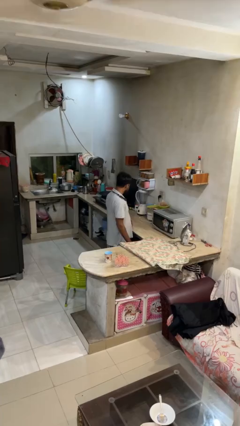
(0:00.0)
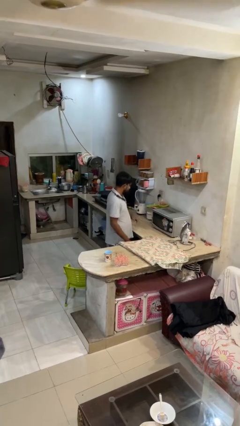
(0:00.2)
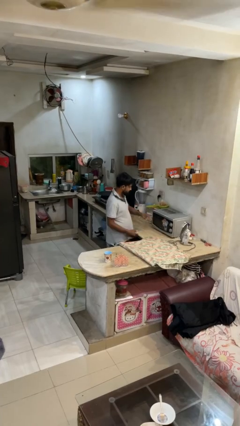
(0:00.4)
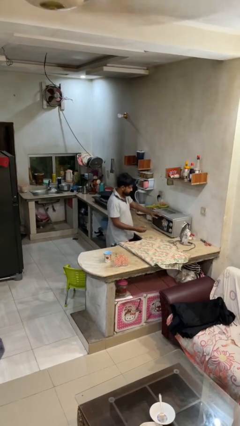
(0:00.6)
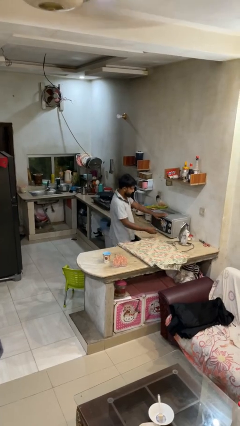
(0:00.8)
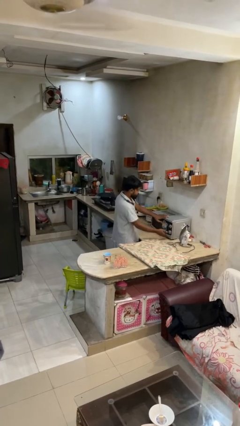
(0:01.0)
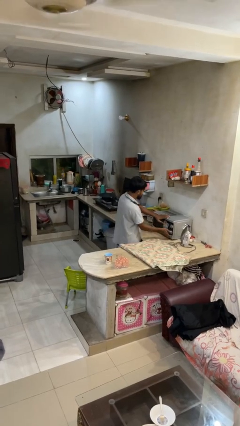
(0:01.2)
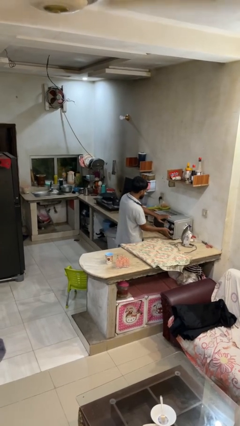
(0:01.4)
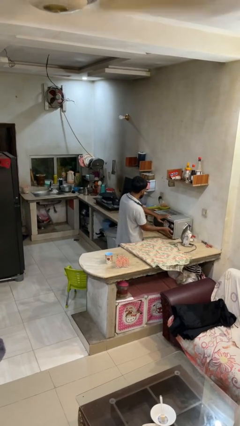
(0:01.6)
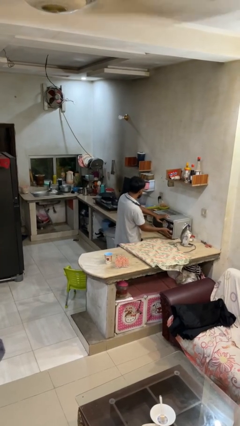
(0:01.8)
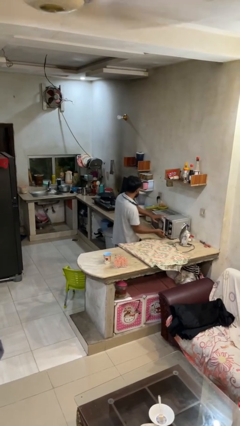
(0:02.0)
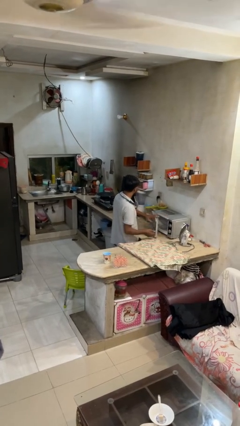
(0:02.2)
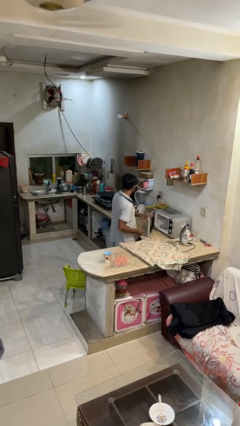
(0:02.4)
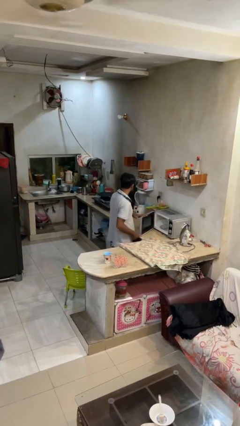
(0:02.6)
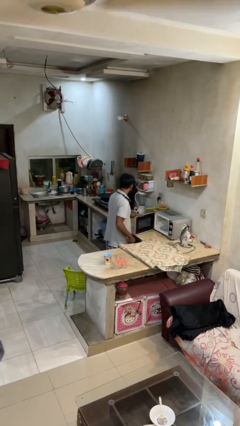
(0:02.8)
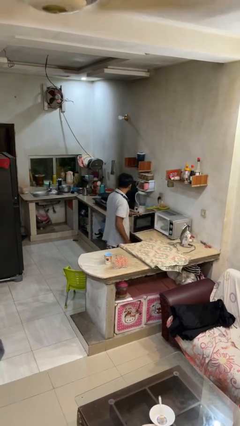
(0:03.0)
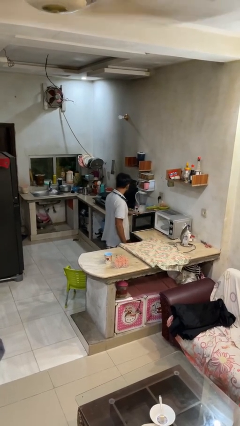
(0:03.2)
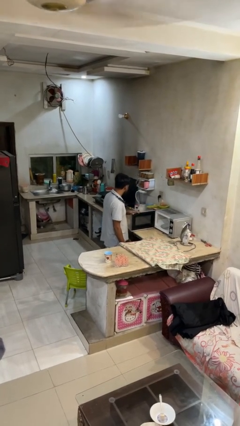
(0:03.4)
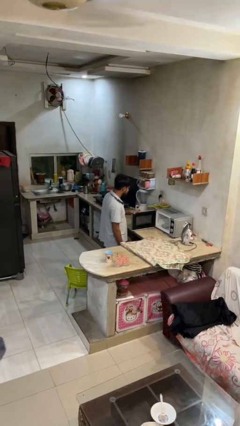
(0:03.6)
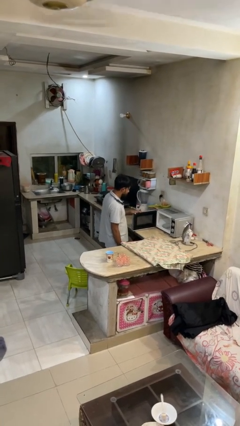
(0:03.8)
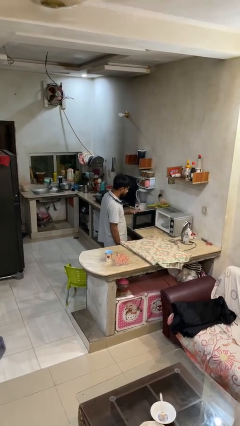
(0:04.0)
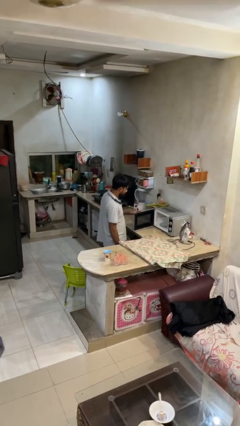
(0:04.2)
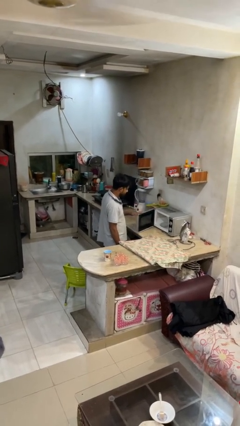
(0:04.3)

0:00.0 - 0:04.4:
person opens microwave

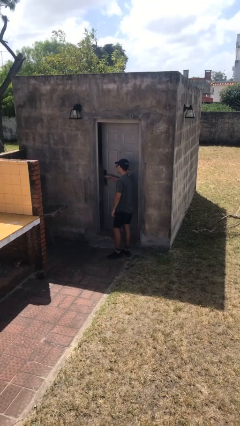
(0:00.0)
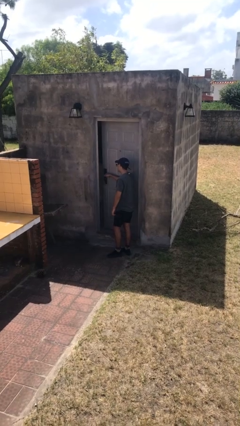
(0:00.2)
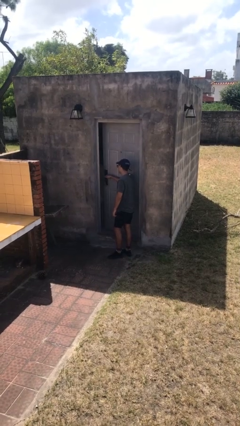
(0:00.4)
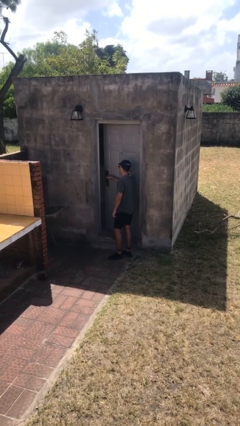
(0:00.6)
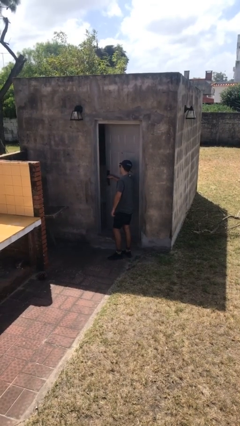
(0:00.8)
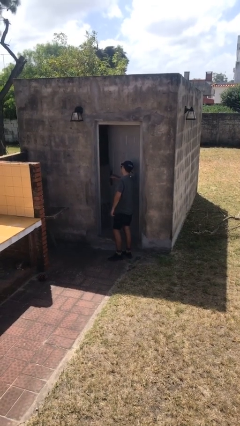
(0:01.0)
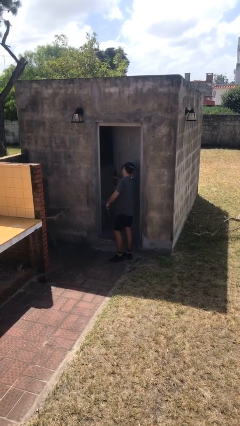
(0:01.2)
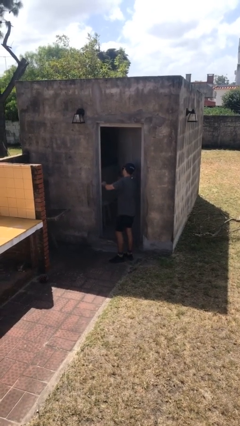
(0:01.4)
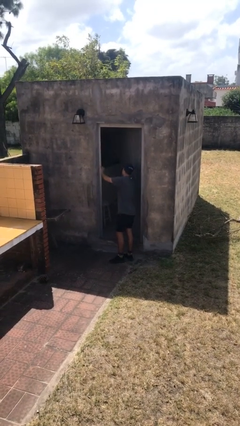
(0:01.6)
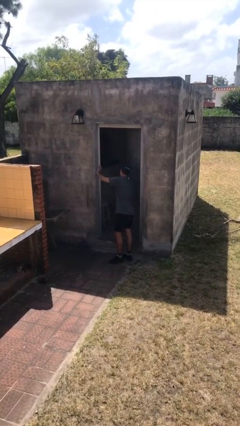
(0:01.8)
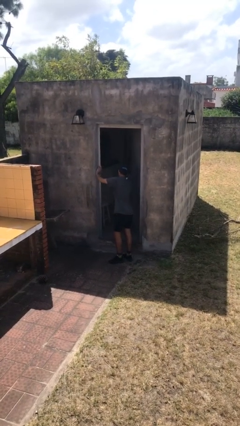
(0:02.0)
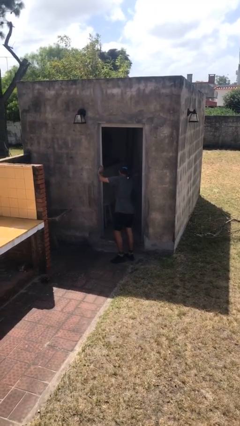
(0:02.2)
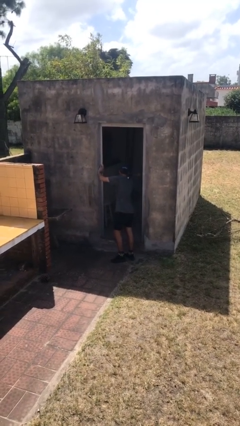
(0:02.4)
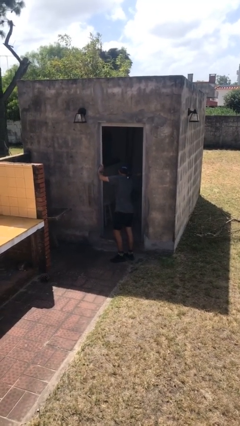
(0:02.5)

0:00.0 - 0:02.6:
person opens facility door

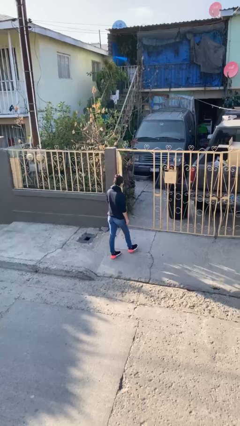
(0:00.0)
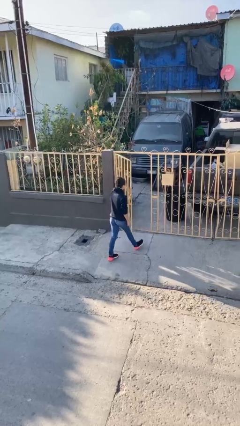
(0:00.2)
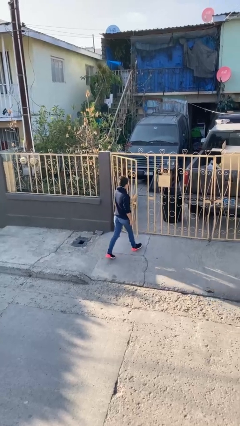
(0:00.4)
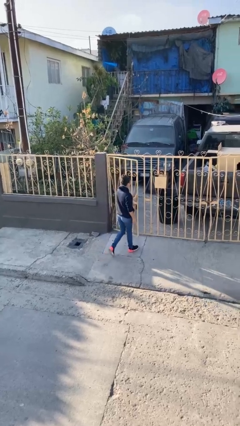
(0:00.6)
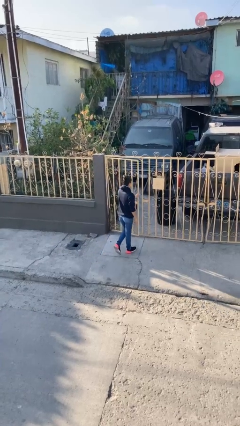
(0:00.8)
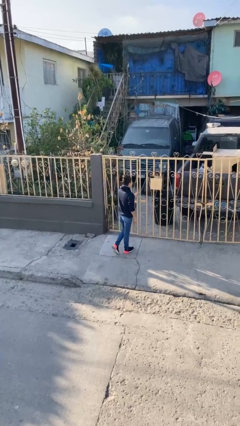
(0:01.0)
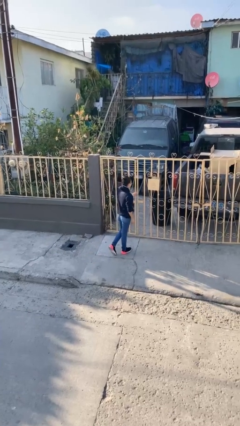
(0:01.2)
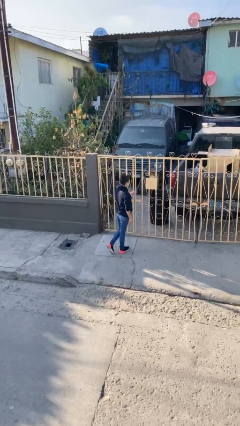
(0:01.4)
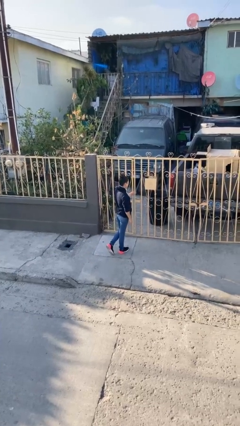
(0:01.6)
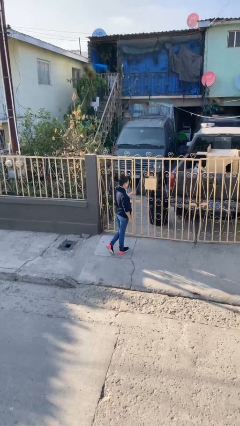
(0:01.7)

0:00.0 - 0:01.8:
person closes facility door

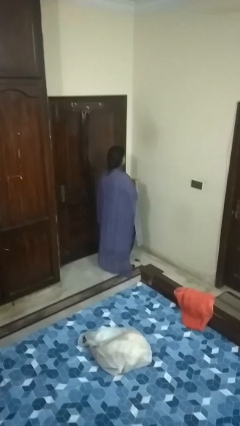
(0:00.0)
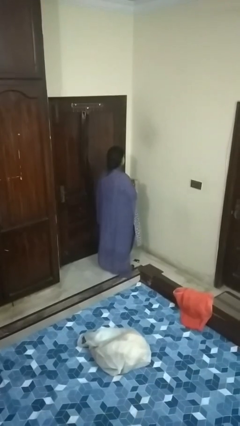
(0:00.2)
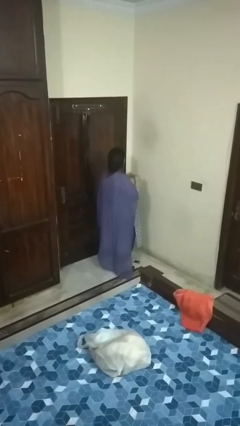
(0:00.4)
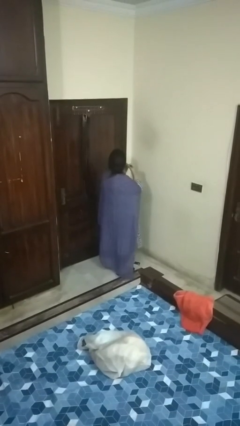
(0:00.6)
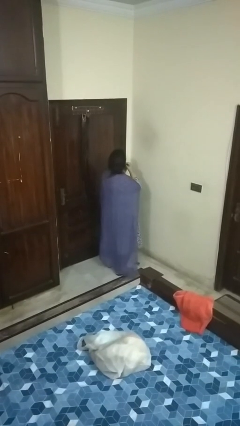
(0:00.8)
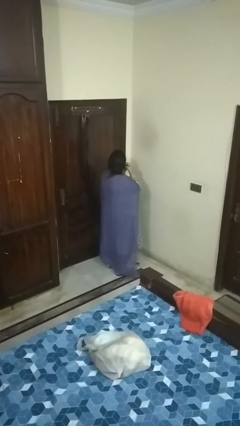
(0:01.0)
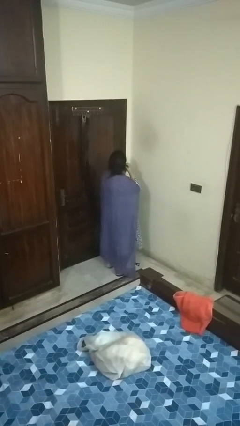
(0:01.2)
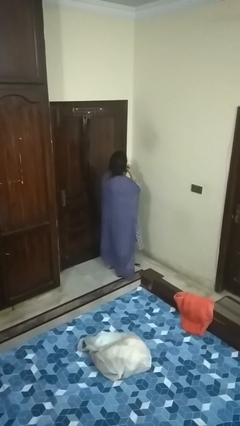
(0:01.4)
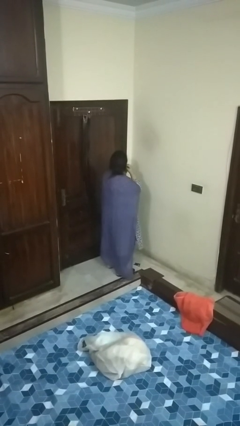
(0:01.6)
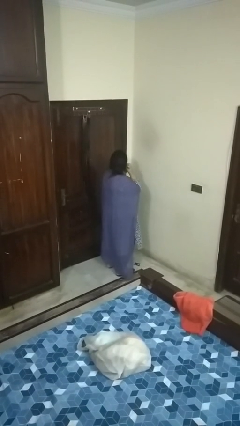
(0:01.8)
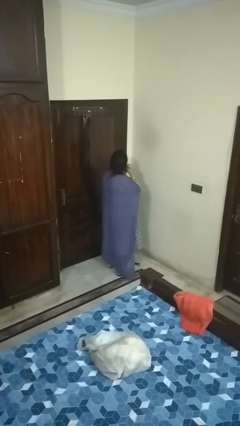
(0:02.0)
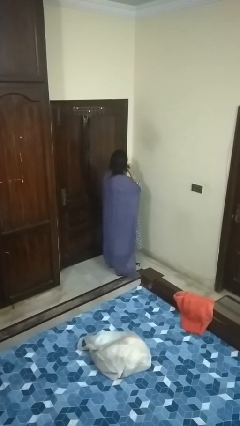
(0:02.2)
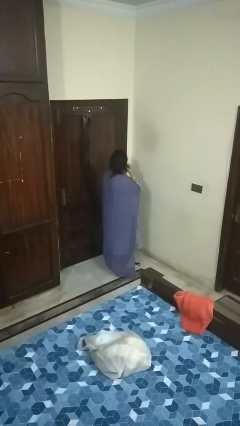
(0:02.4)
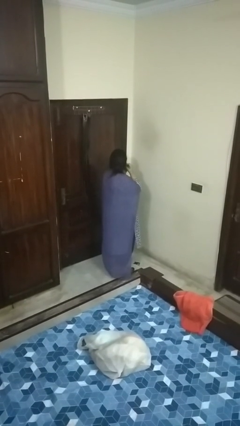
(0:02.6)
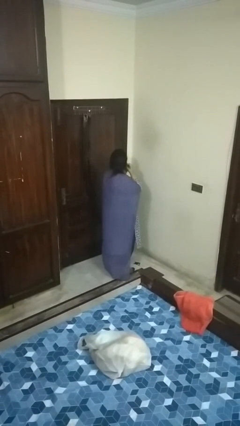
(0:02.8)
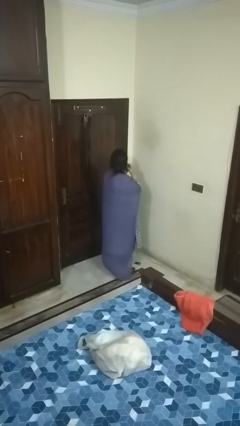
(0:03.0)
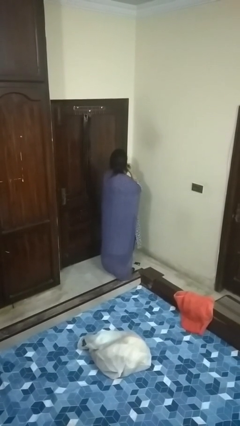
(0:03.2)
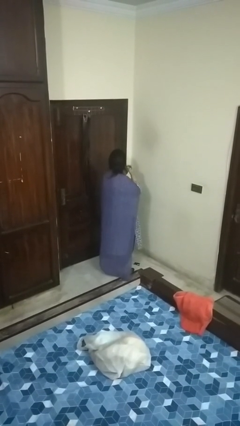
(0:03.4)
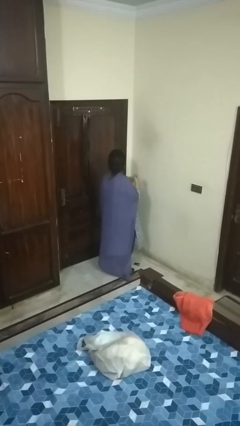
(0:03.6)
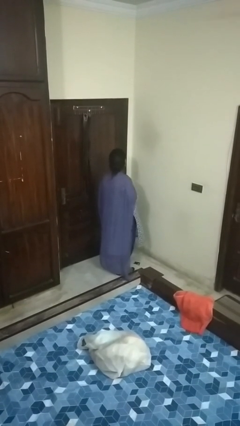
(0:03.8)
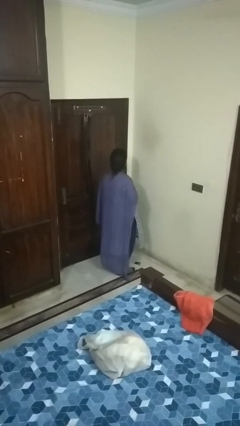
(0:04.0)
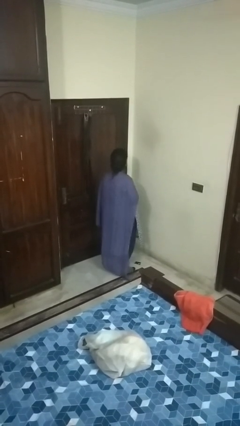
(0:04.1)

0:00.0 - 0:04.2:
person puts on earrings

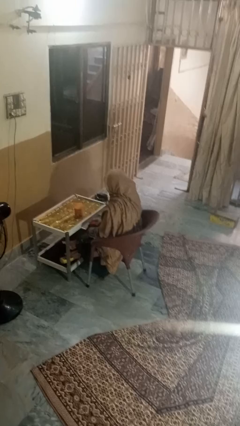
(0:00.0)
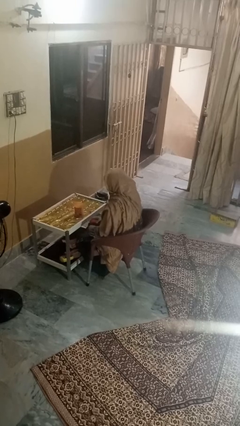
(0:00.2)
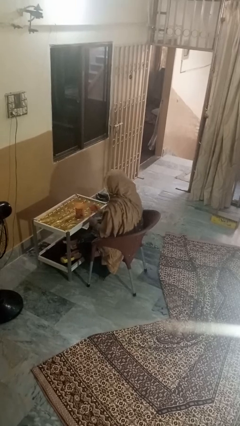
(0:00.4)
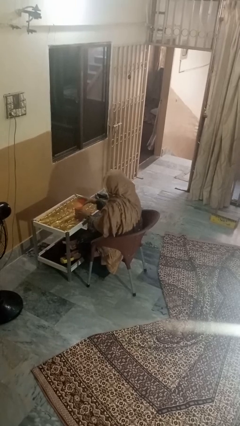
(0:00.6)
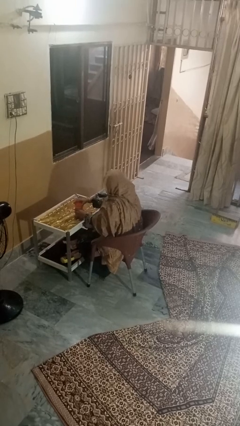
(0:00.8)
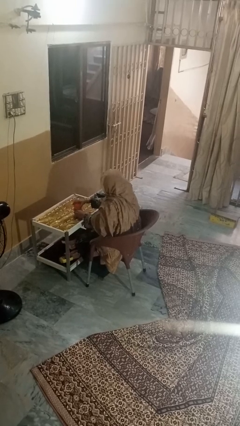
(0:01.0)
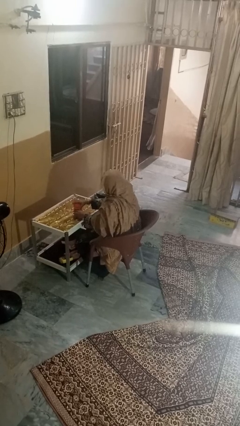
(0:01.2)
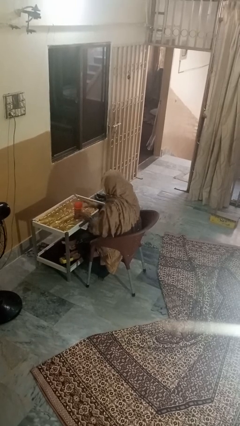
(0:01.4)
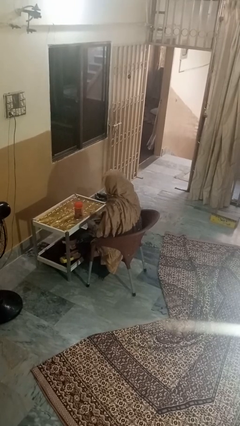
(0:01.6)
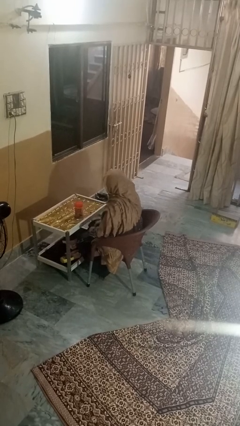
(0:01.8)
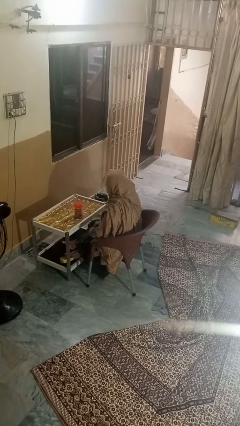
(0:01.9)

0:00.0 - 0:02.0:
person closes jar

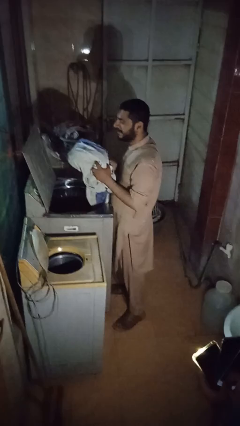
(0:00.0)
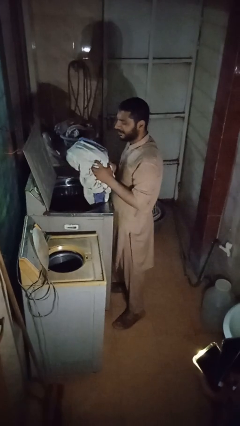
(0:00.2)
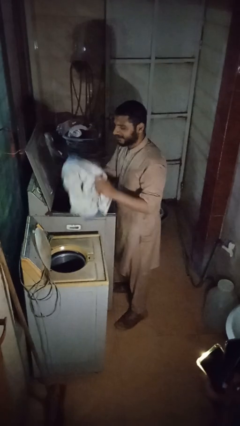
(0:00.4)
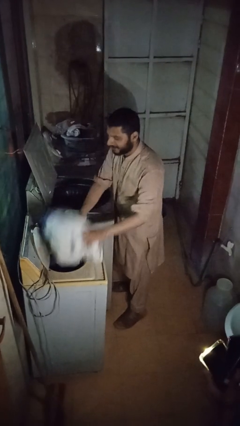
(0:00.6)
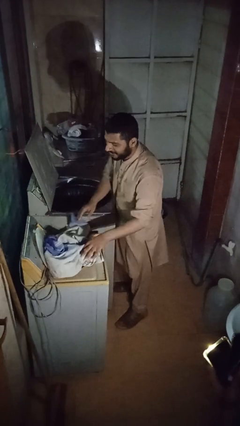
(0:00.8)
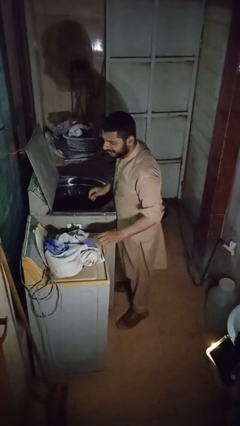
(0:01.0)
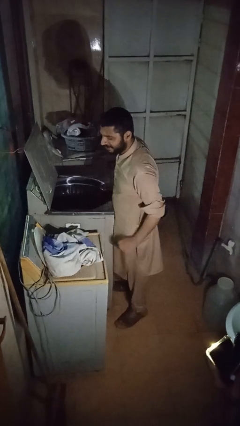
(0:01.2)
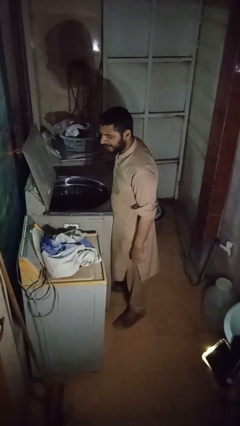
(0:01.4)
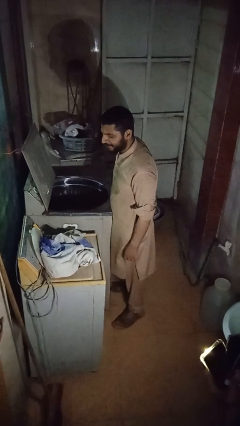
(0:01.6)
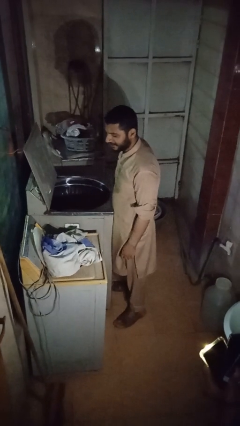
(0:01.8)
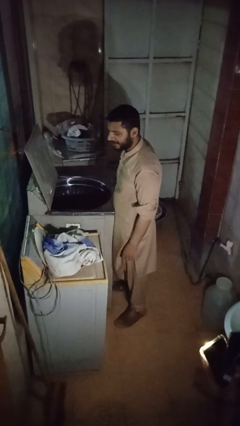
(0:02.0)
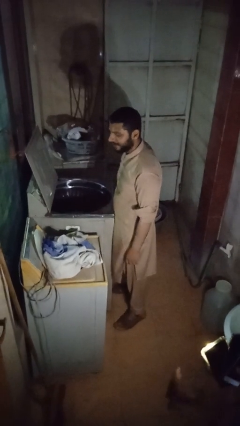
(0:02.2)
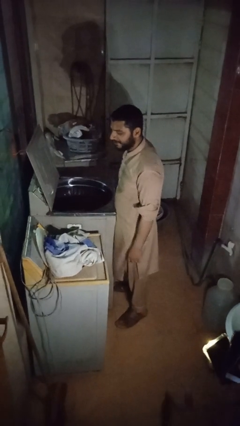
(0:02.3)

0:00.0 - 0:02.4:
person loads dryer
